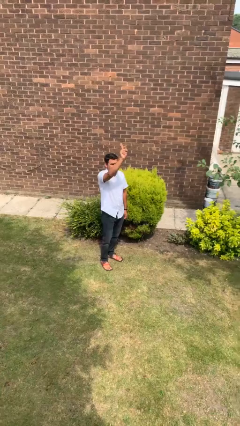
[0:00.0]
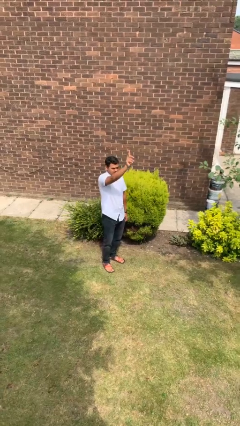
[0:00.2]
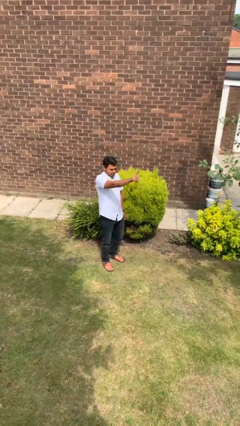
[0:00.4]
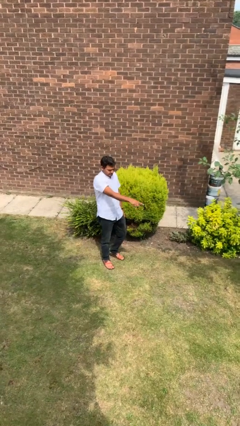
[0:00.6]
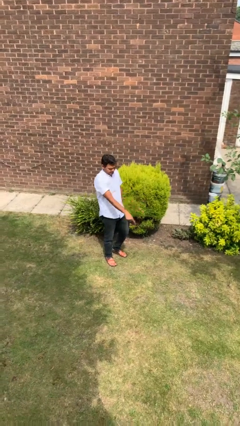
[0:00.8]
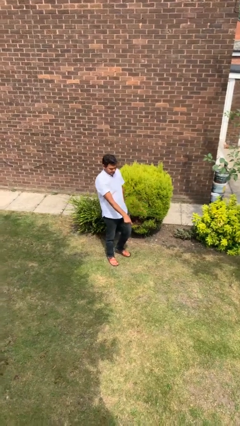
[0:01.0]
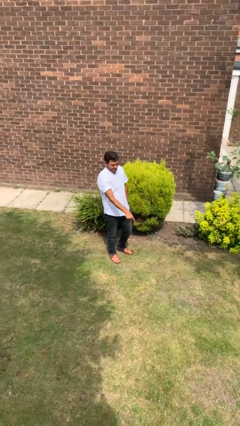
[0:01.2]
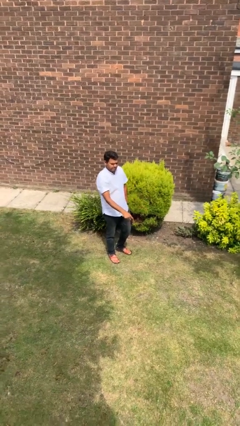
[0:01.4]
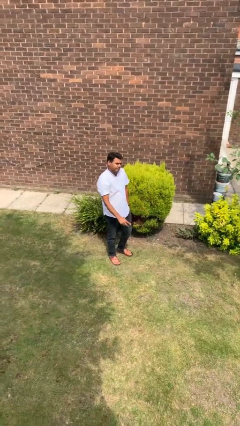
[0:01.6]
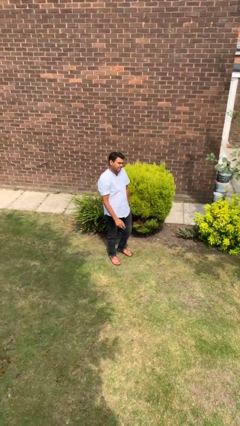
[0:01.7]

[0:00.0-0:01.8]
person gestures swipe down

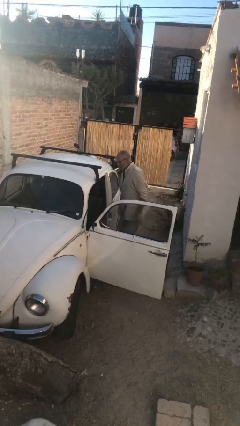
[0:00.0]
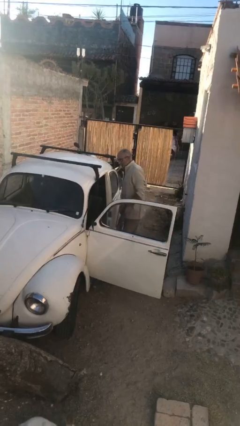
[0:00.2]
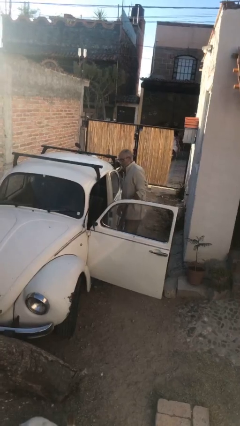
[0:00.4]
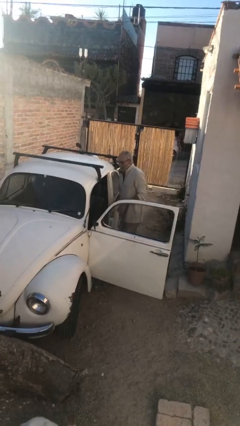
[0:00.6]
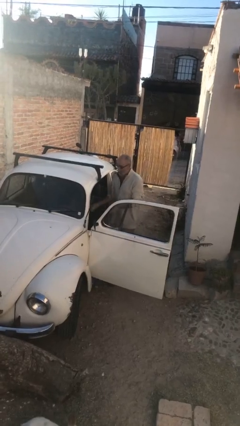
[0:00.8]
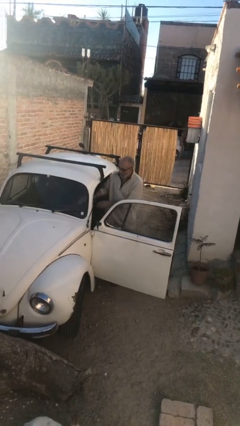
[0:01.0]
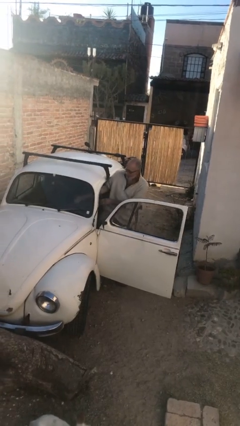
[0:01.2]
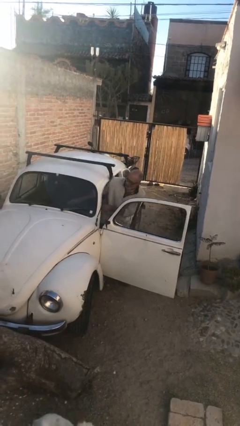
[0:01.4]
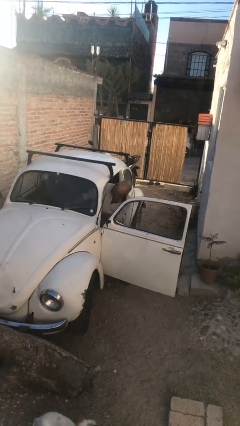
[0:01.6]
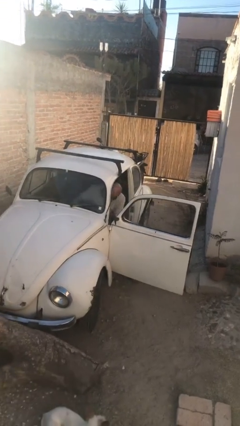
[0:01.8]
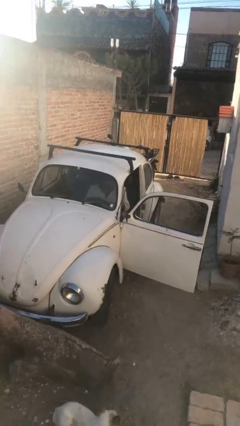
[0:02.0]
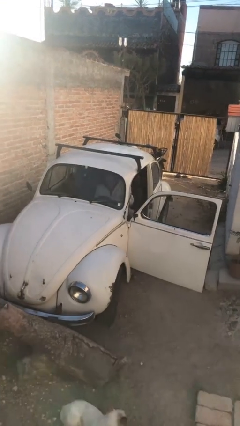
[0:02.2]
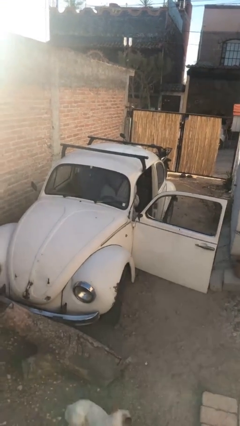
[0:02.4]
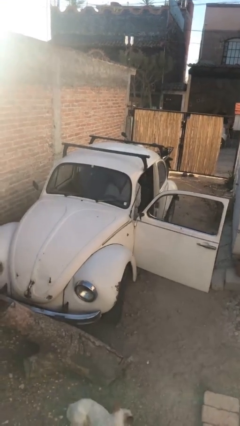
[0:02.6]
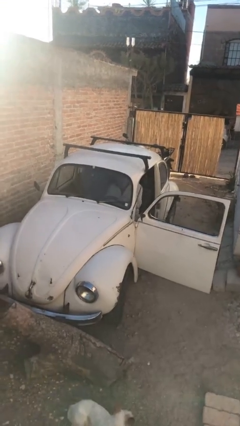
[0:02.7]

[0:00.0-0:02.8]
person enters car

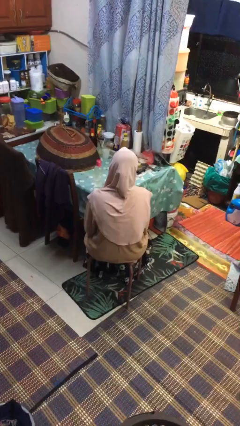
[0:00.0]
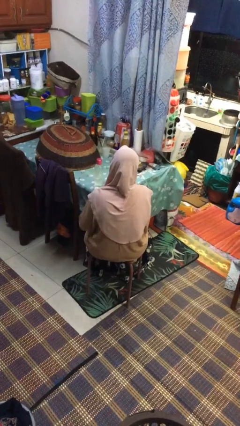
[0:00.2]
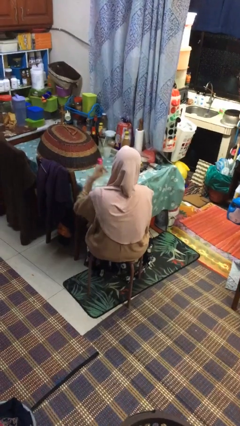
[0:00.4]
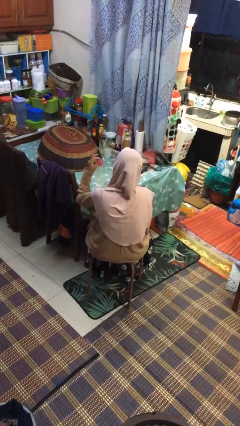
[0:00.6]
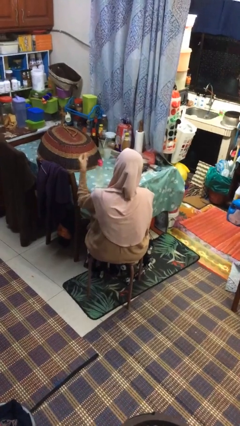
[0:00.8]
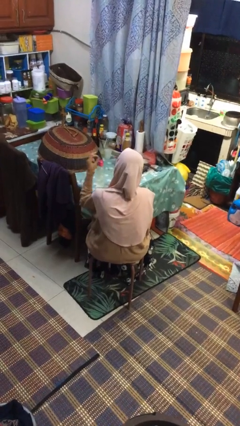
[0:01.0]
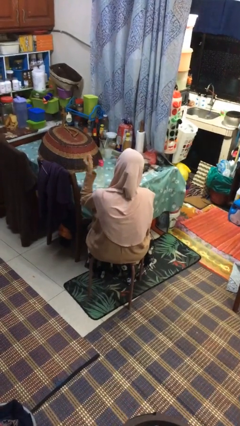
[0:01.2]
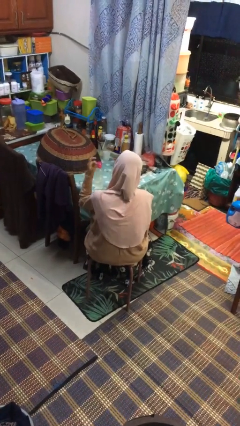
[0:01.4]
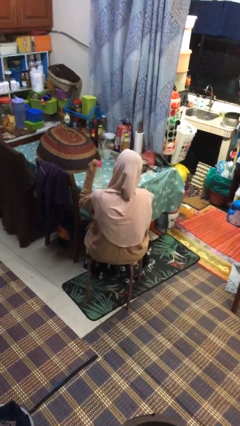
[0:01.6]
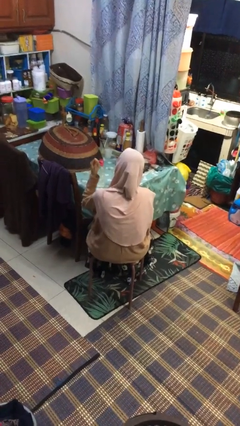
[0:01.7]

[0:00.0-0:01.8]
person snaps fingers

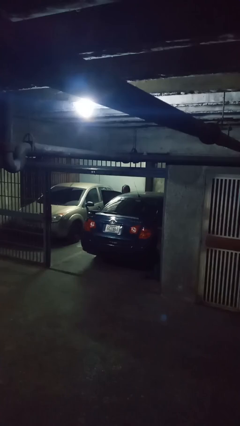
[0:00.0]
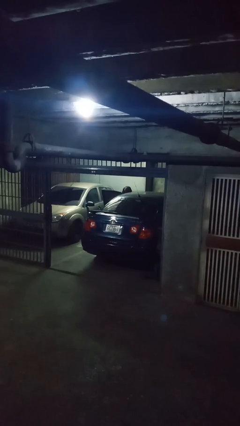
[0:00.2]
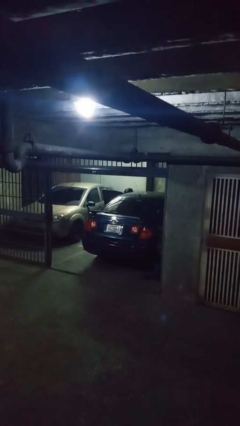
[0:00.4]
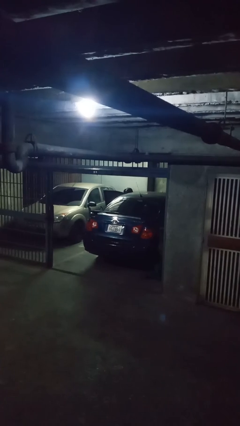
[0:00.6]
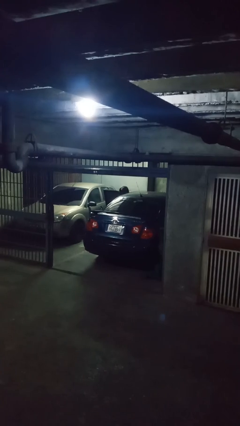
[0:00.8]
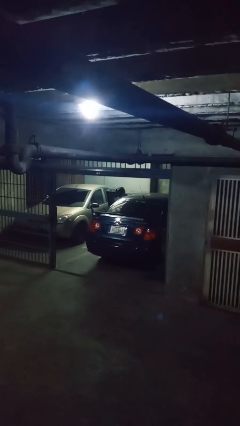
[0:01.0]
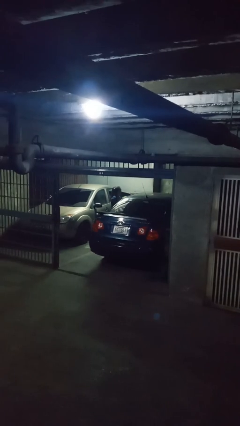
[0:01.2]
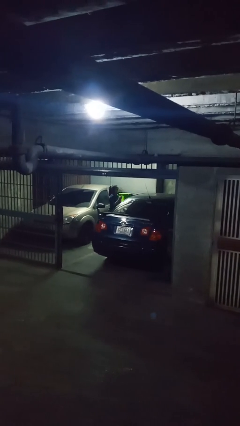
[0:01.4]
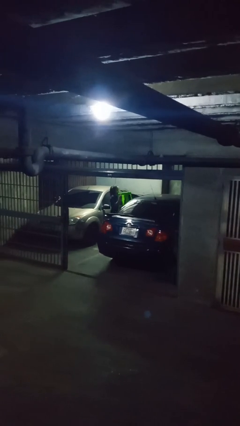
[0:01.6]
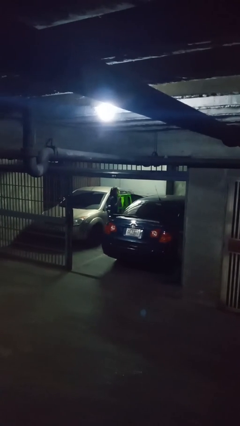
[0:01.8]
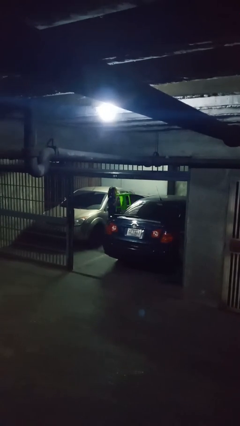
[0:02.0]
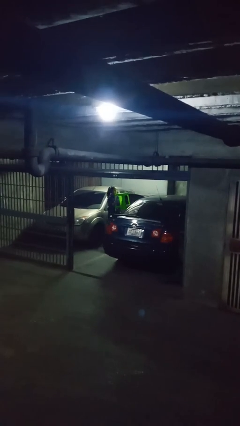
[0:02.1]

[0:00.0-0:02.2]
person unloads car

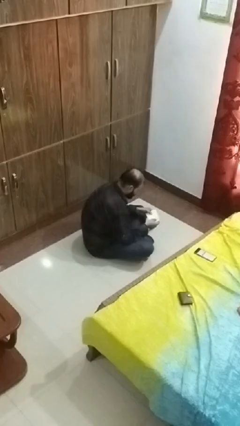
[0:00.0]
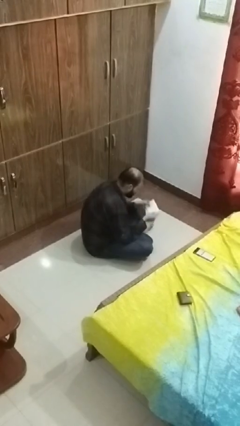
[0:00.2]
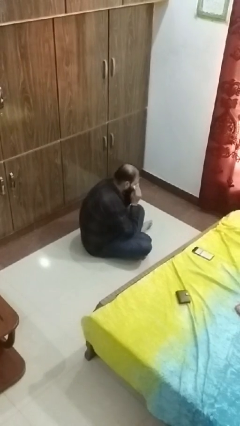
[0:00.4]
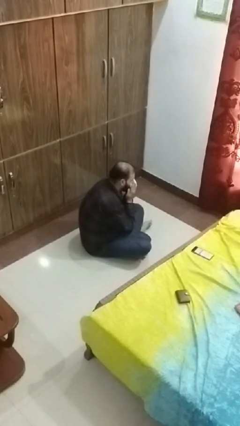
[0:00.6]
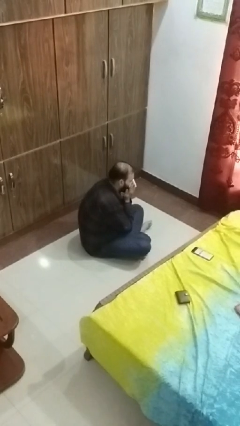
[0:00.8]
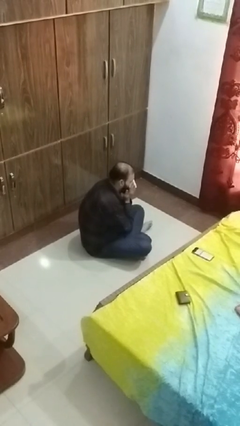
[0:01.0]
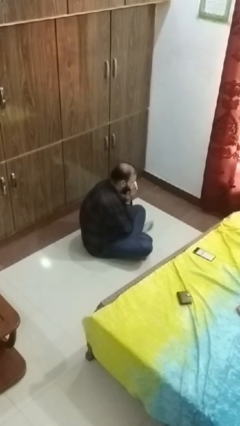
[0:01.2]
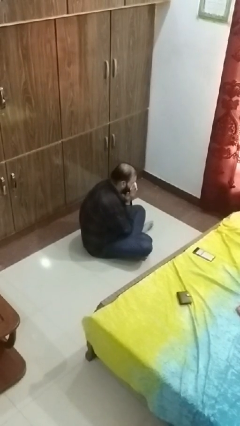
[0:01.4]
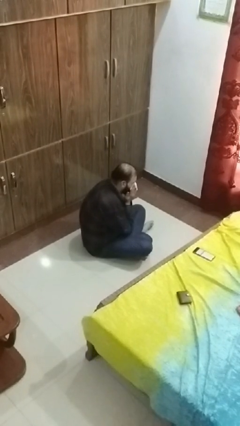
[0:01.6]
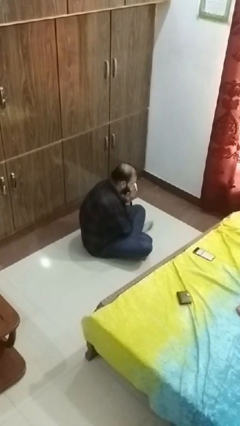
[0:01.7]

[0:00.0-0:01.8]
person blows nose

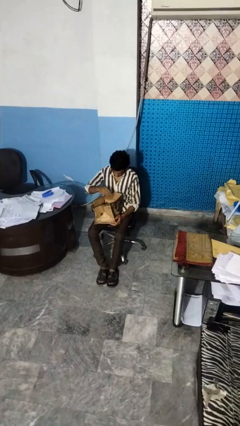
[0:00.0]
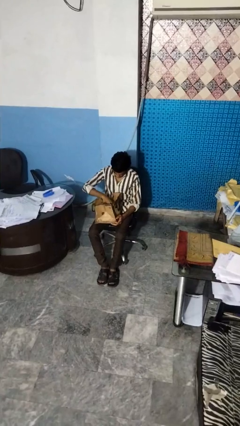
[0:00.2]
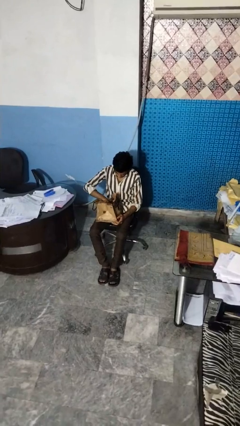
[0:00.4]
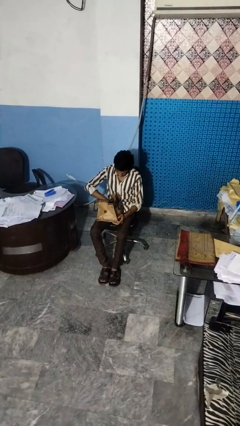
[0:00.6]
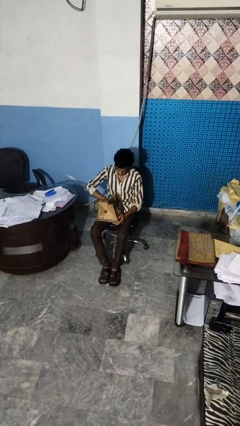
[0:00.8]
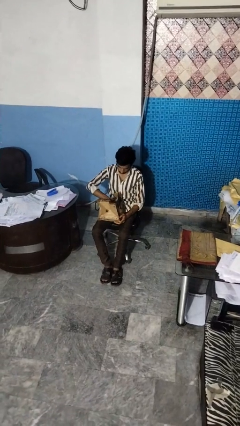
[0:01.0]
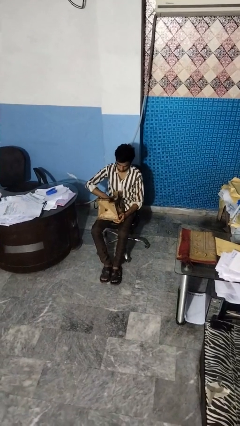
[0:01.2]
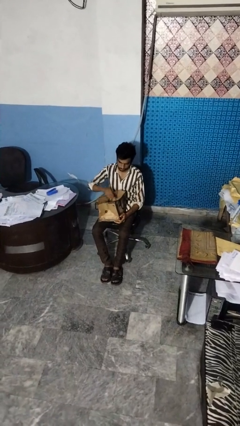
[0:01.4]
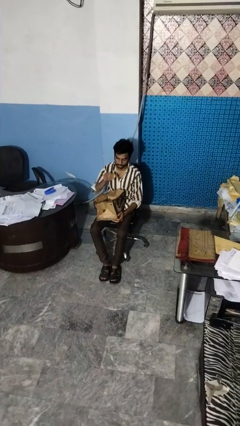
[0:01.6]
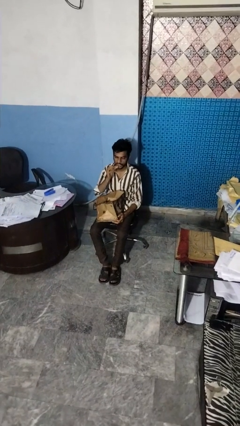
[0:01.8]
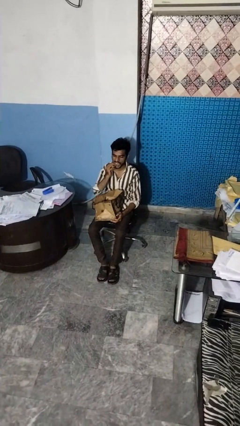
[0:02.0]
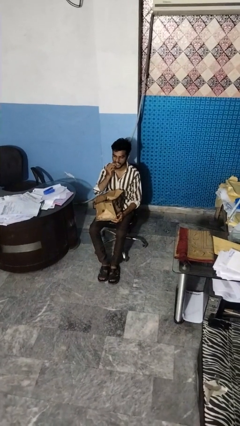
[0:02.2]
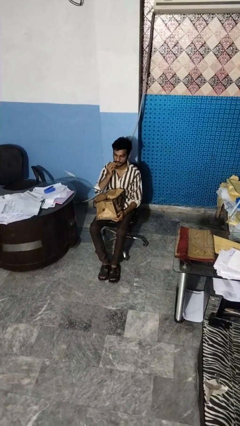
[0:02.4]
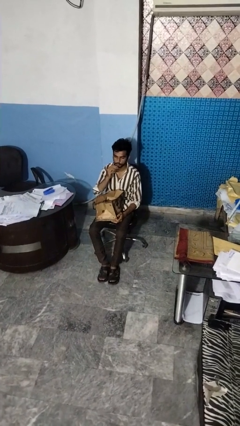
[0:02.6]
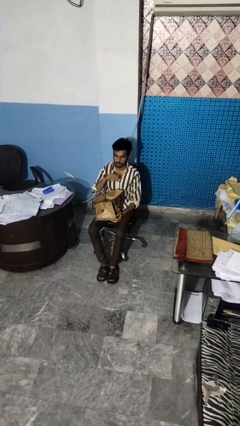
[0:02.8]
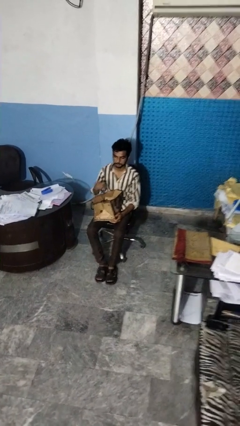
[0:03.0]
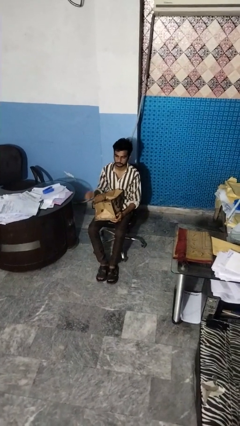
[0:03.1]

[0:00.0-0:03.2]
person eats snack from bag

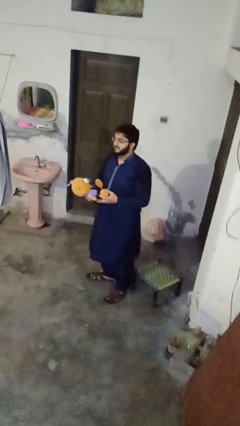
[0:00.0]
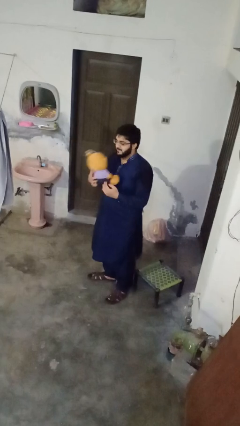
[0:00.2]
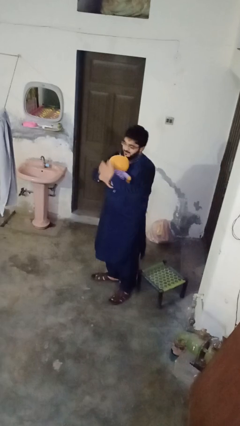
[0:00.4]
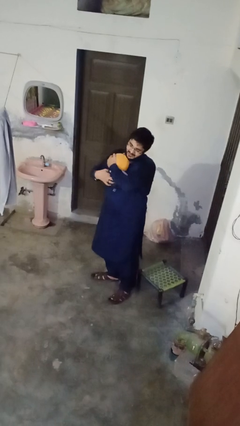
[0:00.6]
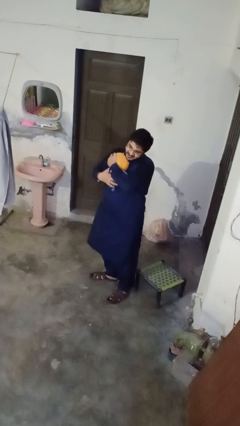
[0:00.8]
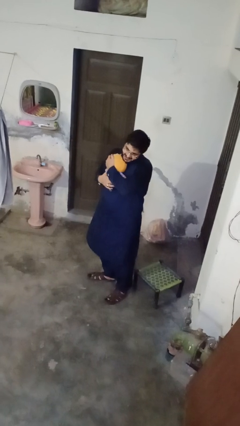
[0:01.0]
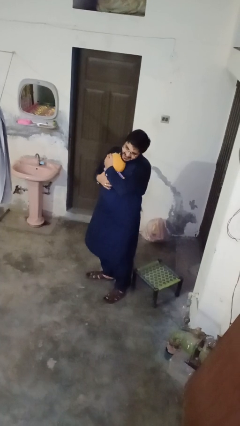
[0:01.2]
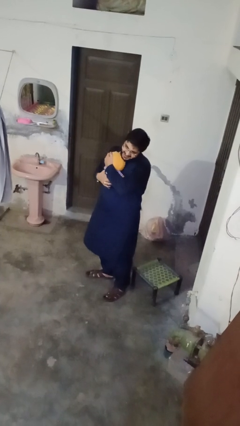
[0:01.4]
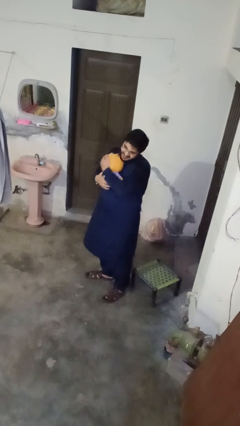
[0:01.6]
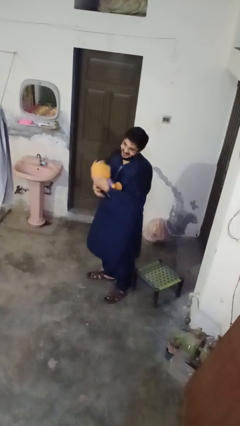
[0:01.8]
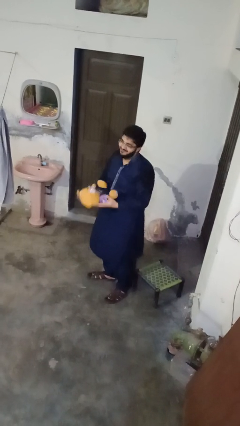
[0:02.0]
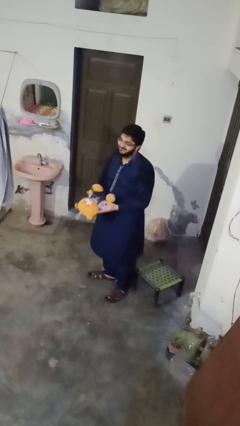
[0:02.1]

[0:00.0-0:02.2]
person hugs stuffed animal

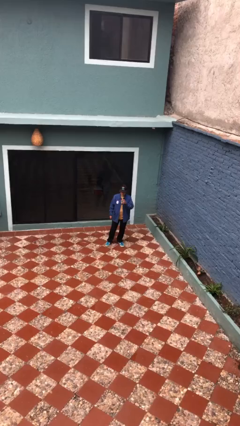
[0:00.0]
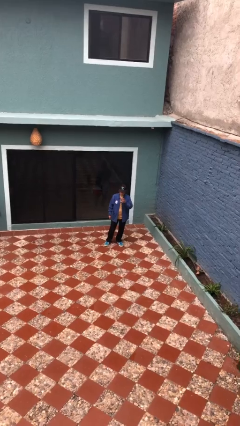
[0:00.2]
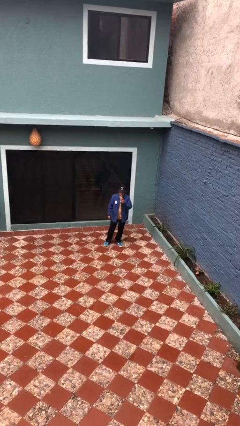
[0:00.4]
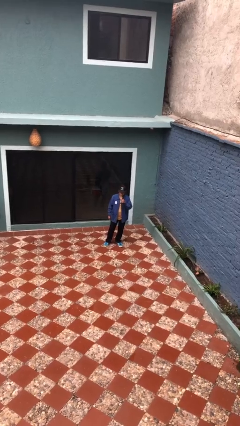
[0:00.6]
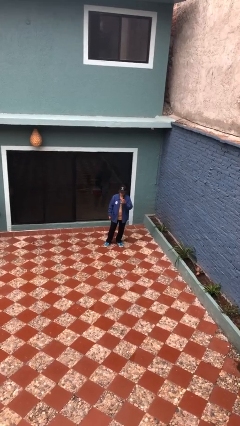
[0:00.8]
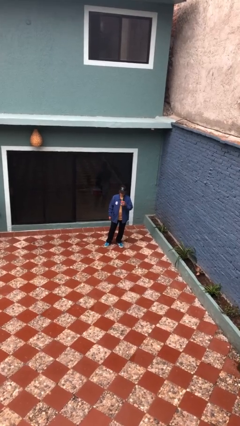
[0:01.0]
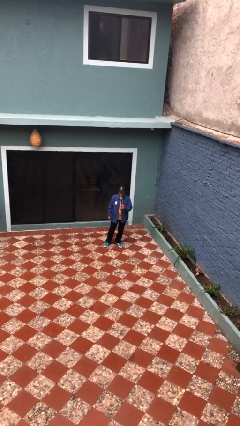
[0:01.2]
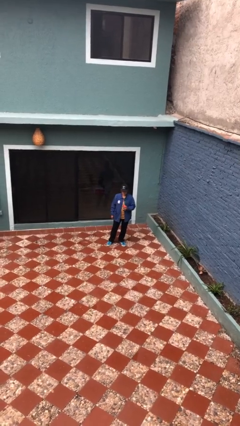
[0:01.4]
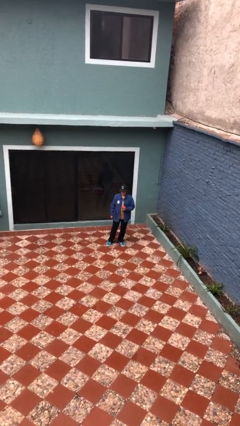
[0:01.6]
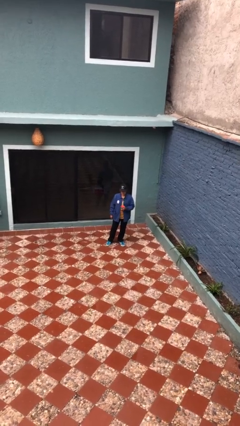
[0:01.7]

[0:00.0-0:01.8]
person drinks from straw
